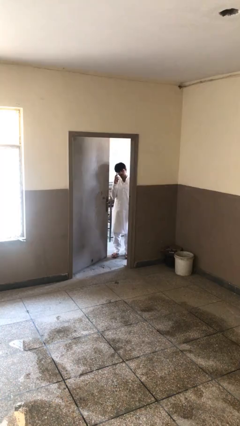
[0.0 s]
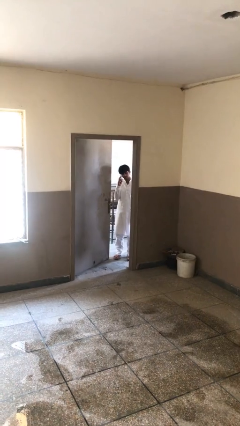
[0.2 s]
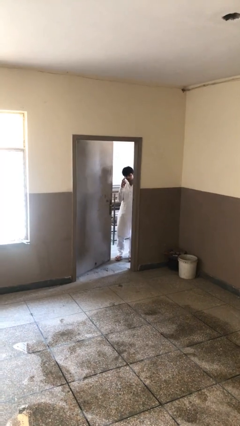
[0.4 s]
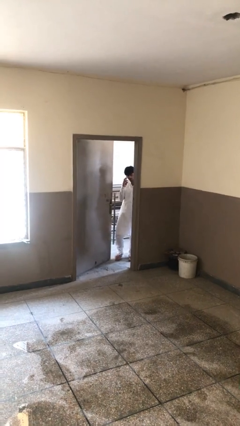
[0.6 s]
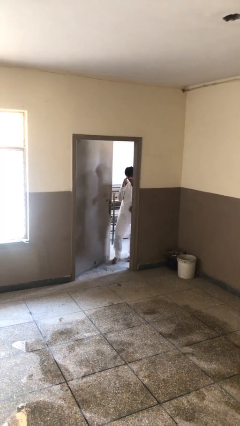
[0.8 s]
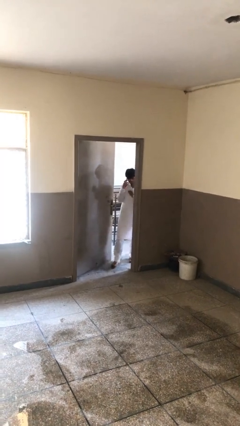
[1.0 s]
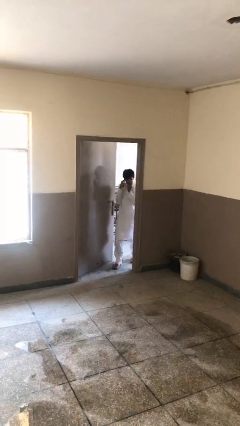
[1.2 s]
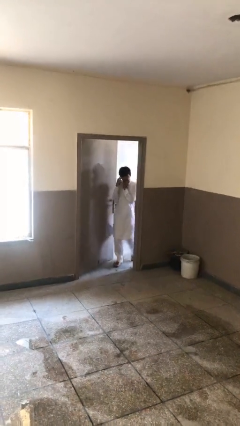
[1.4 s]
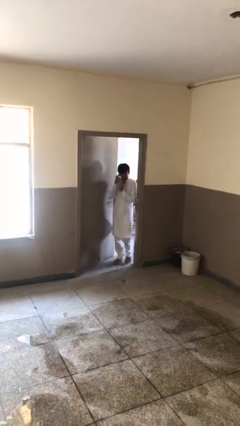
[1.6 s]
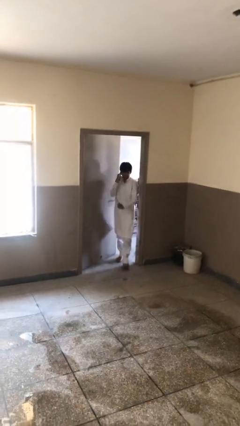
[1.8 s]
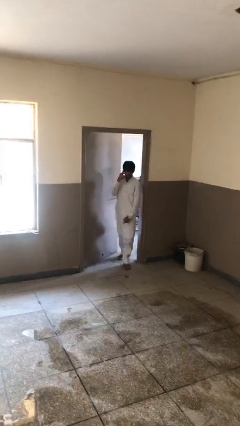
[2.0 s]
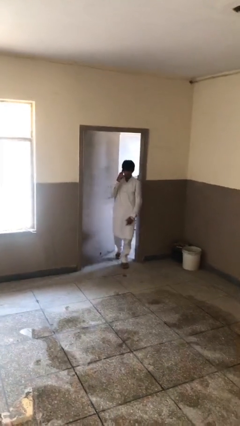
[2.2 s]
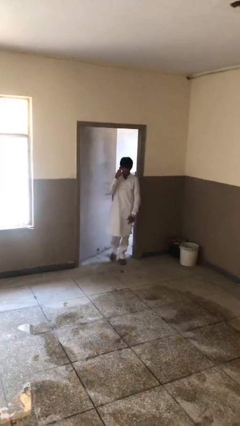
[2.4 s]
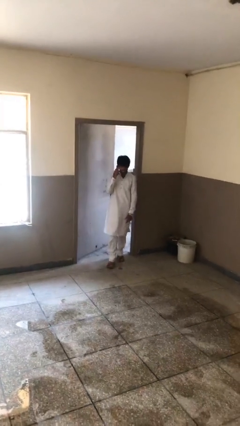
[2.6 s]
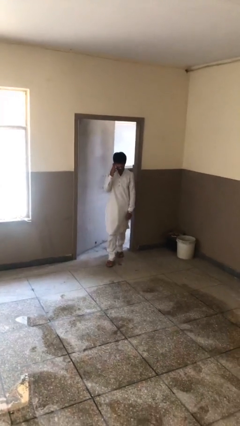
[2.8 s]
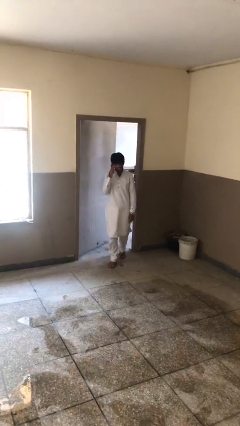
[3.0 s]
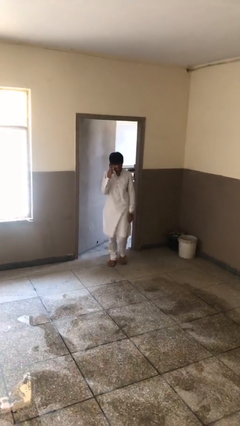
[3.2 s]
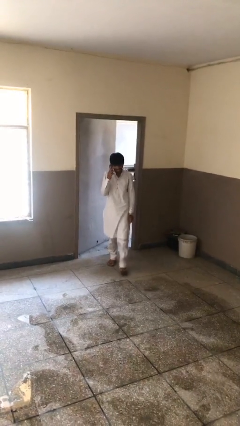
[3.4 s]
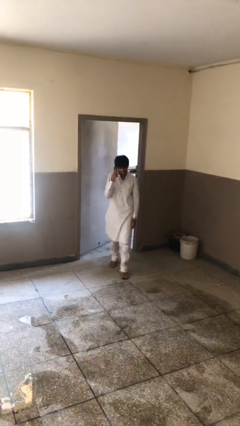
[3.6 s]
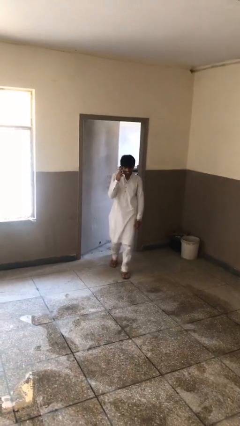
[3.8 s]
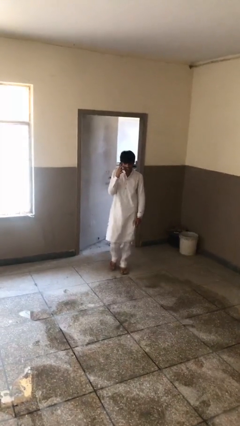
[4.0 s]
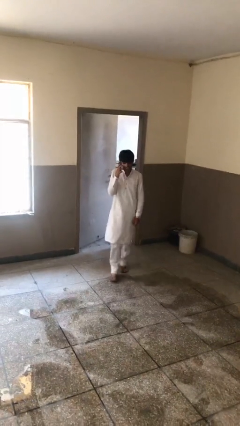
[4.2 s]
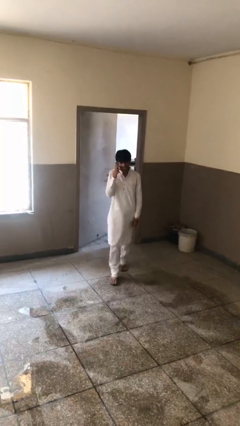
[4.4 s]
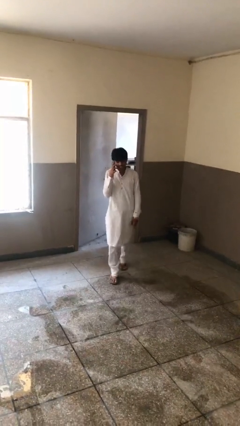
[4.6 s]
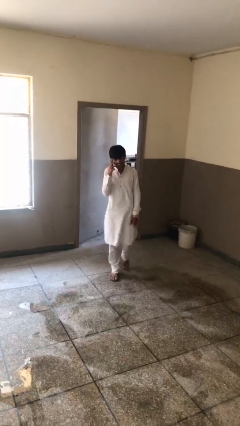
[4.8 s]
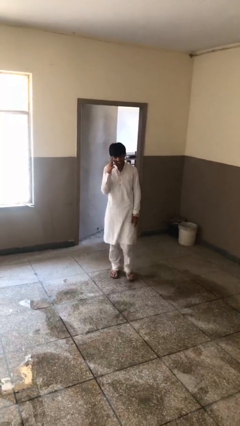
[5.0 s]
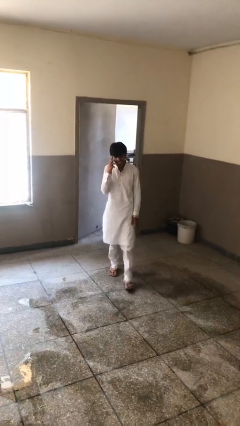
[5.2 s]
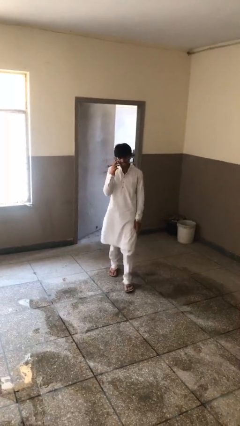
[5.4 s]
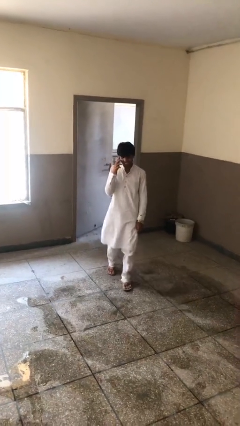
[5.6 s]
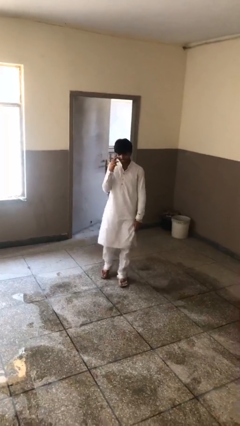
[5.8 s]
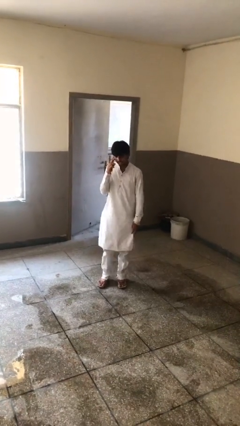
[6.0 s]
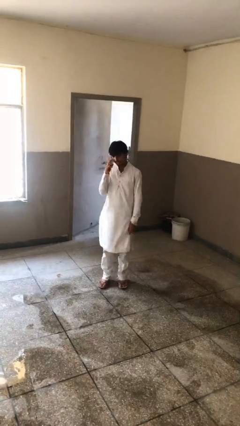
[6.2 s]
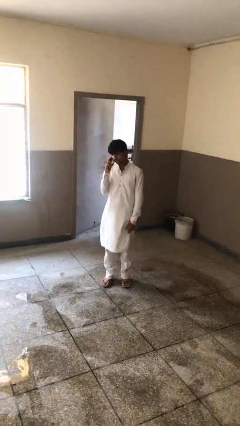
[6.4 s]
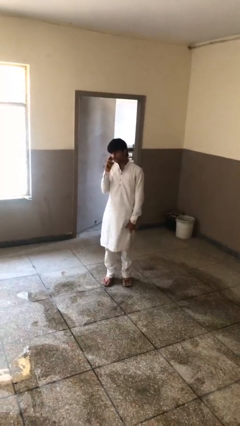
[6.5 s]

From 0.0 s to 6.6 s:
person enters scene through structure

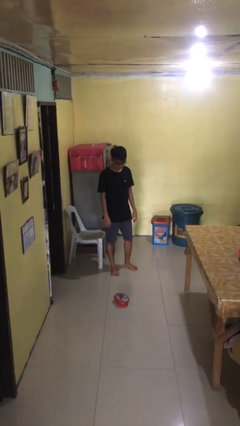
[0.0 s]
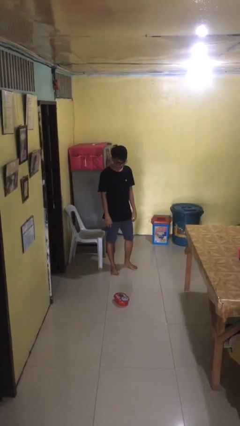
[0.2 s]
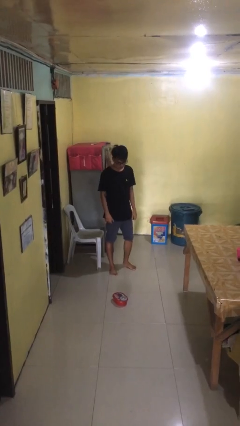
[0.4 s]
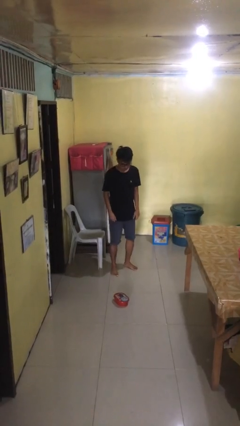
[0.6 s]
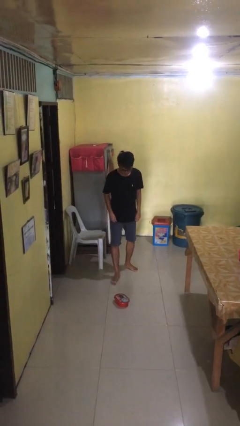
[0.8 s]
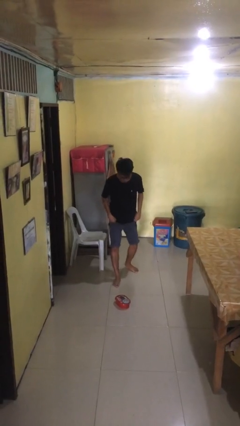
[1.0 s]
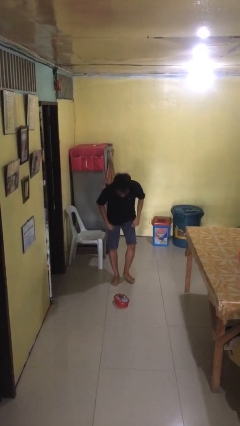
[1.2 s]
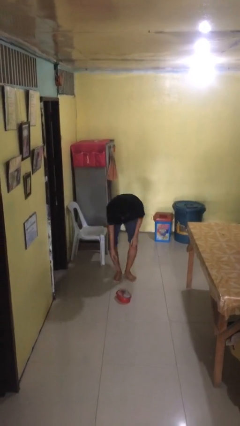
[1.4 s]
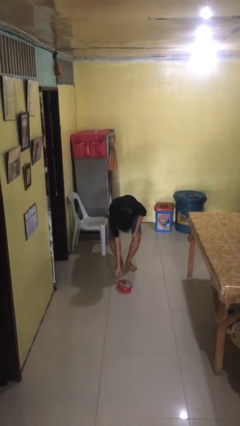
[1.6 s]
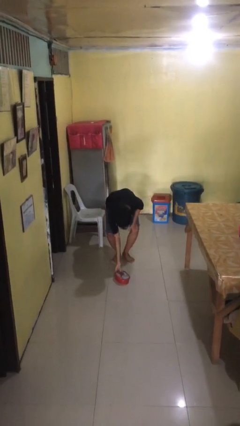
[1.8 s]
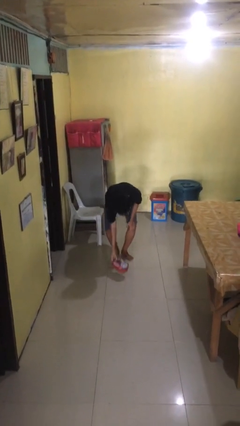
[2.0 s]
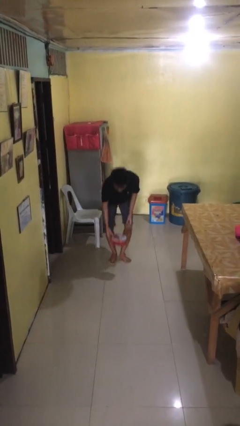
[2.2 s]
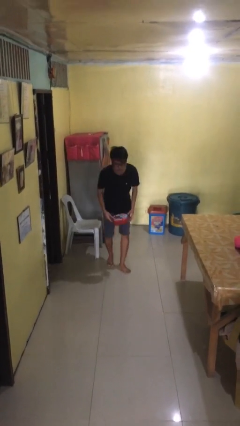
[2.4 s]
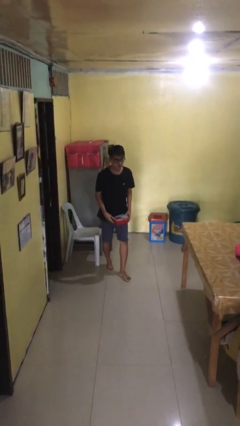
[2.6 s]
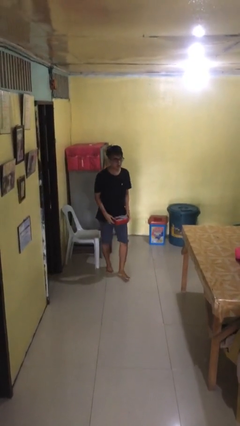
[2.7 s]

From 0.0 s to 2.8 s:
person picks up object from floor

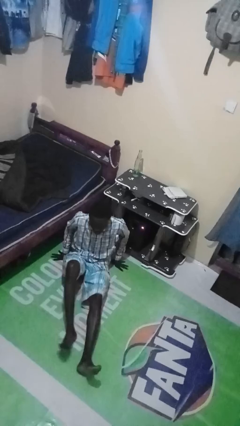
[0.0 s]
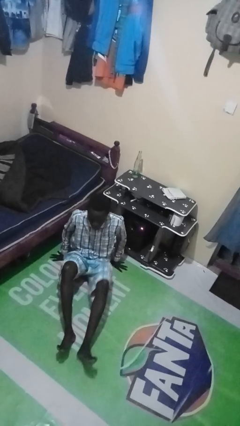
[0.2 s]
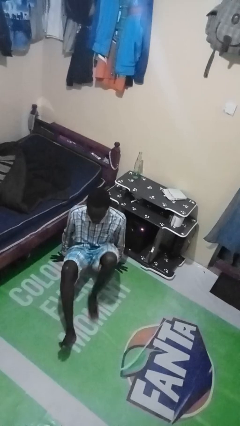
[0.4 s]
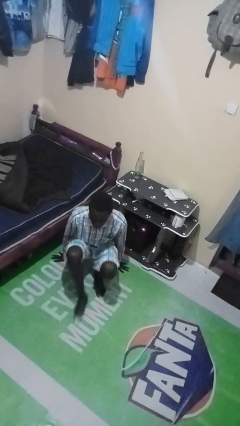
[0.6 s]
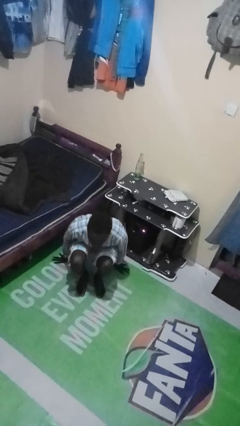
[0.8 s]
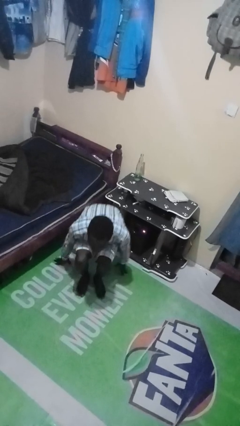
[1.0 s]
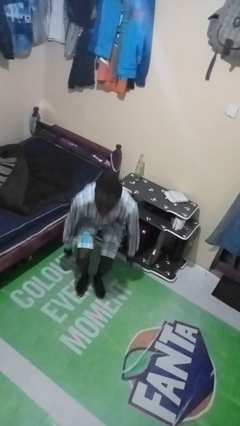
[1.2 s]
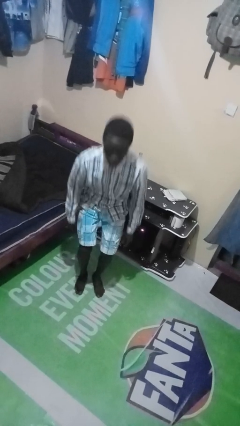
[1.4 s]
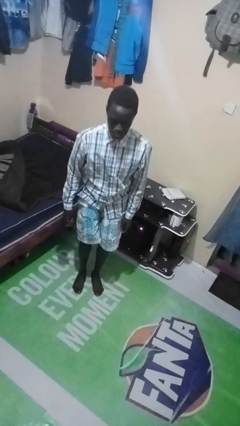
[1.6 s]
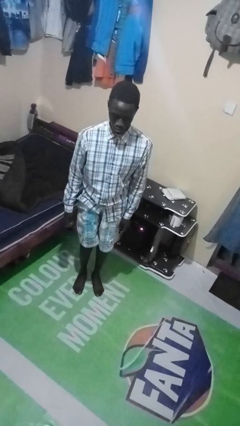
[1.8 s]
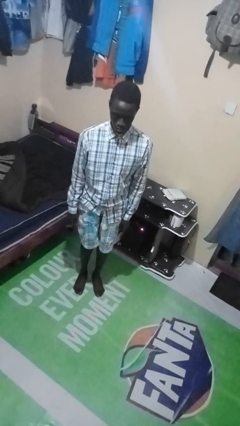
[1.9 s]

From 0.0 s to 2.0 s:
person stands up from floor

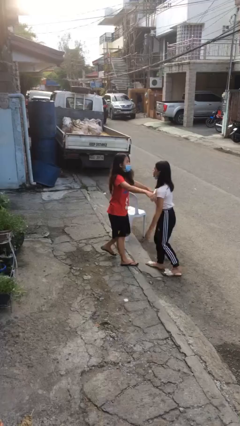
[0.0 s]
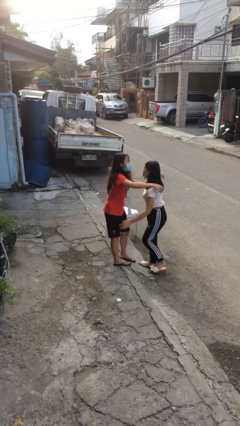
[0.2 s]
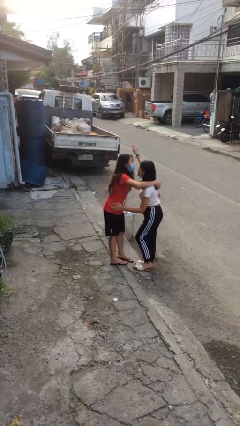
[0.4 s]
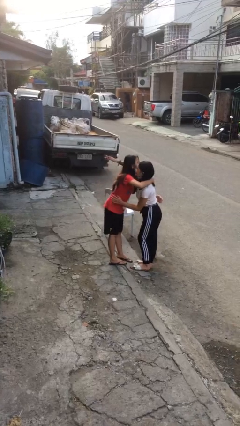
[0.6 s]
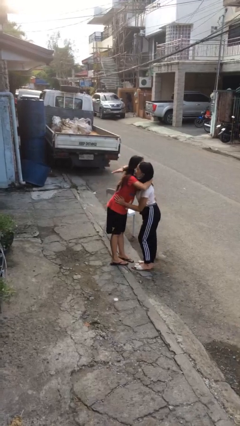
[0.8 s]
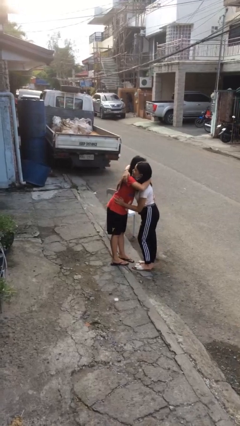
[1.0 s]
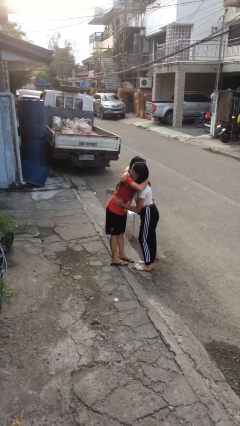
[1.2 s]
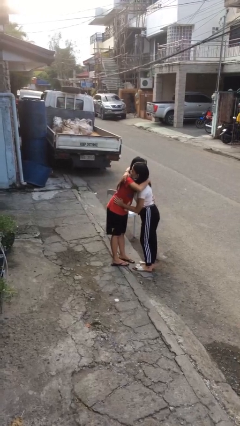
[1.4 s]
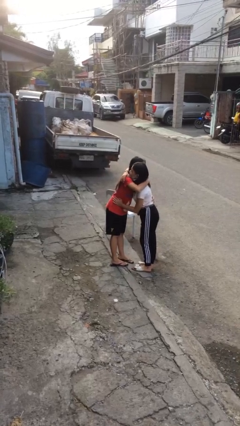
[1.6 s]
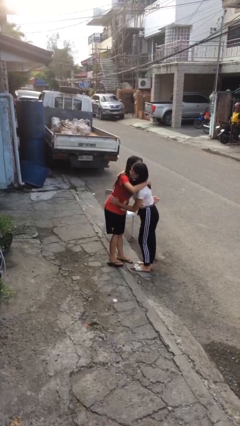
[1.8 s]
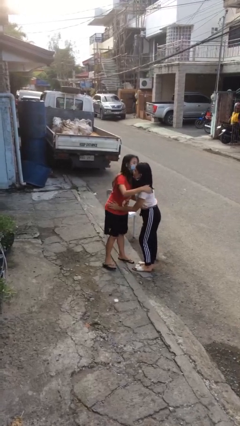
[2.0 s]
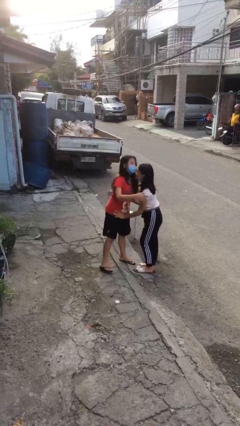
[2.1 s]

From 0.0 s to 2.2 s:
person embraces person

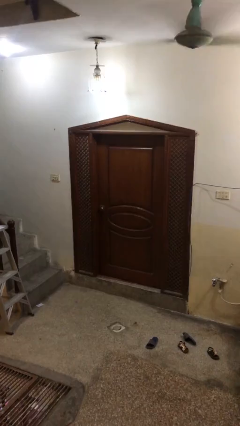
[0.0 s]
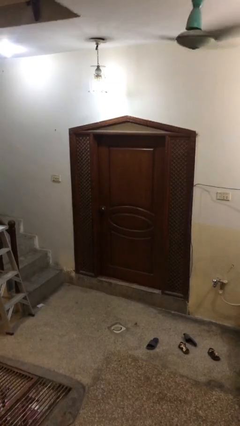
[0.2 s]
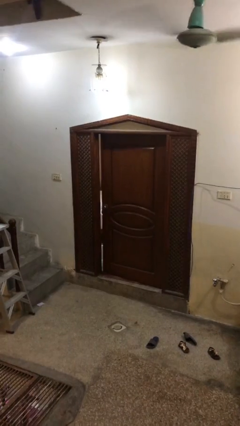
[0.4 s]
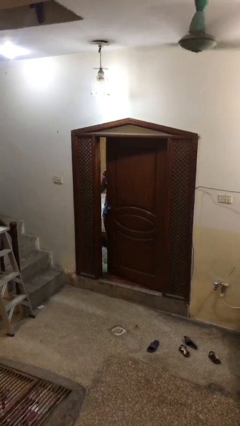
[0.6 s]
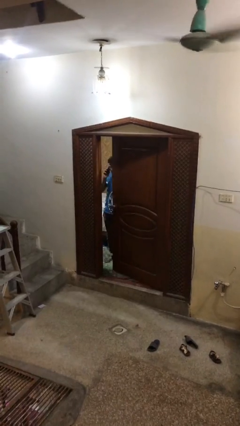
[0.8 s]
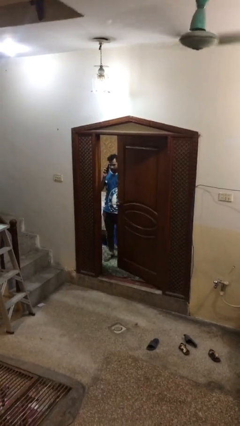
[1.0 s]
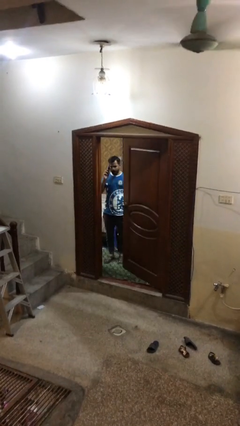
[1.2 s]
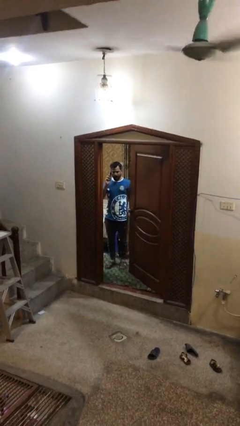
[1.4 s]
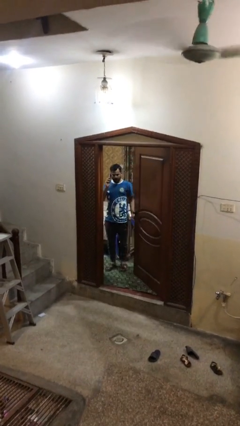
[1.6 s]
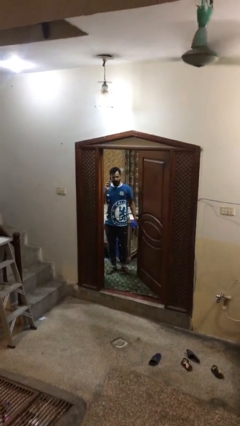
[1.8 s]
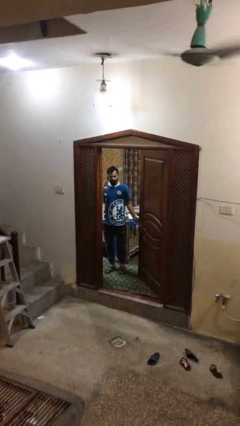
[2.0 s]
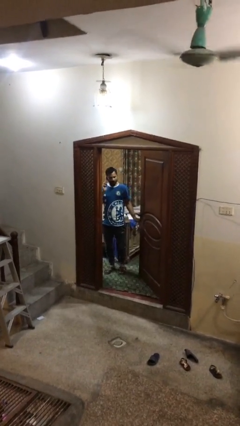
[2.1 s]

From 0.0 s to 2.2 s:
person opens facility door

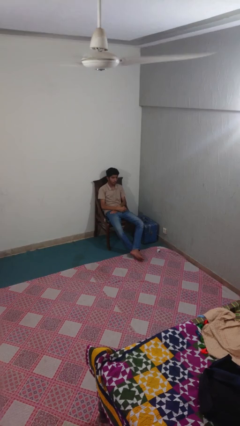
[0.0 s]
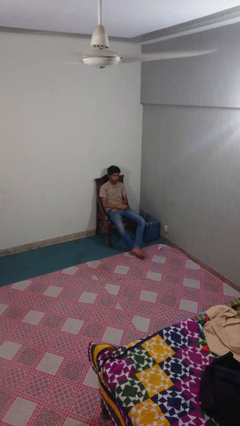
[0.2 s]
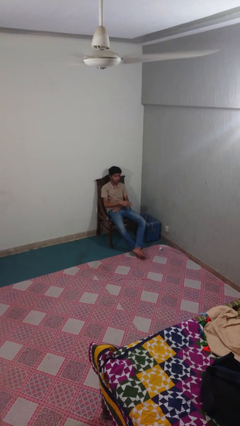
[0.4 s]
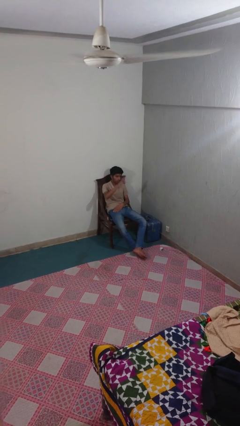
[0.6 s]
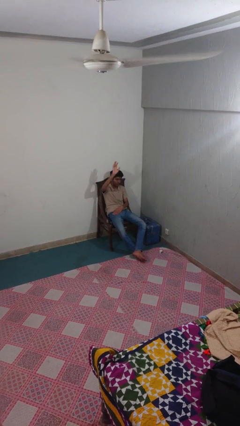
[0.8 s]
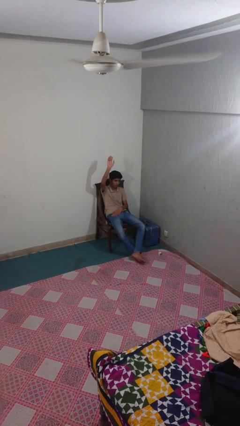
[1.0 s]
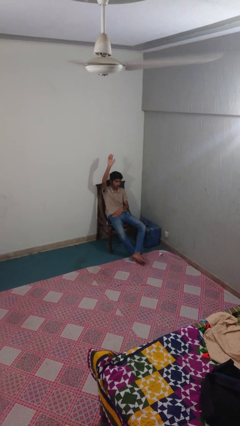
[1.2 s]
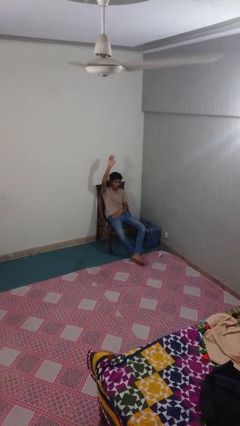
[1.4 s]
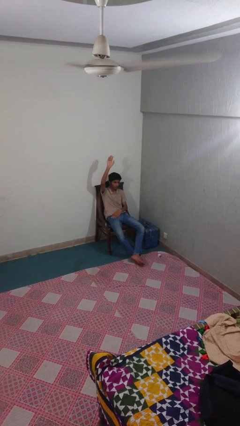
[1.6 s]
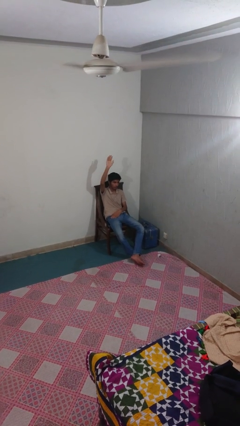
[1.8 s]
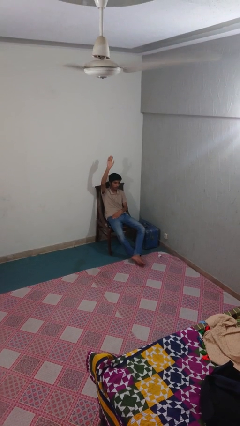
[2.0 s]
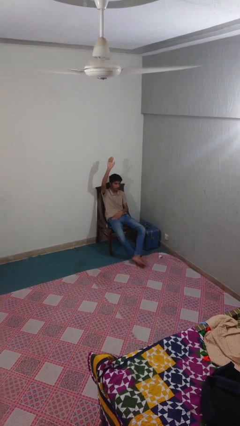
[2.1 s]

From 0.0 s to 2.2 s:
person gestures raise hand
